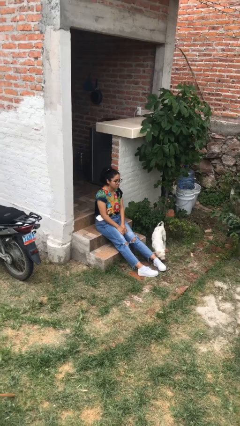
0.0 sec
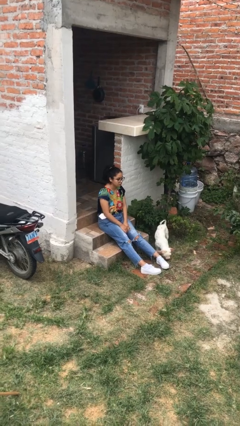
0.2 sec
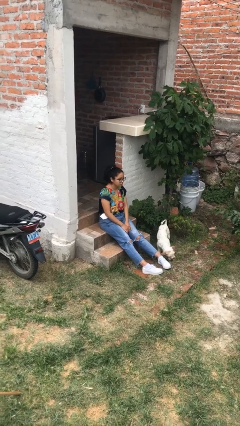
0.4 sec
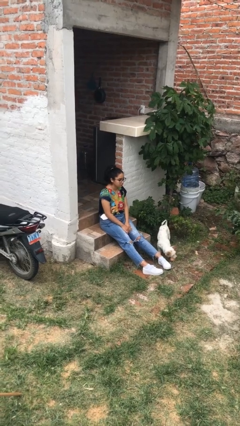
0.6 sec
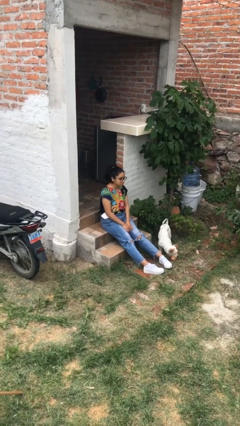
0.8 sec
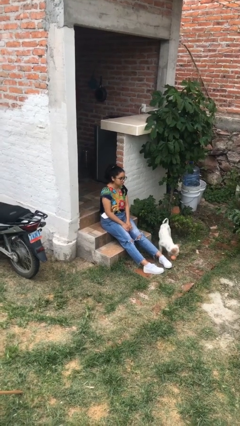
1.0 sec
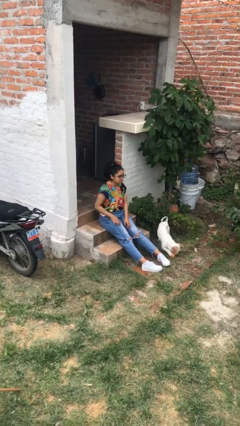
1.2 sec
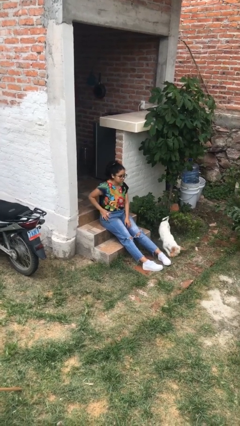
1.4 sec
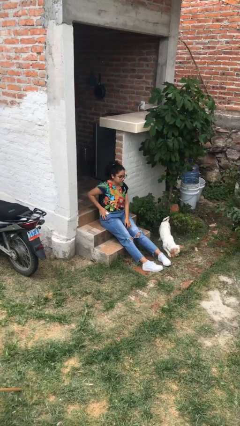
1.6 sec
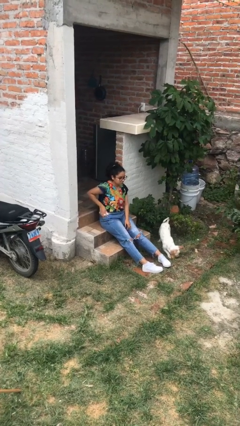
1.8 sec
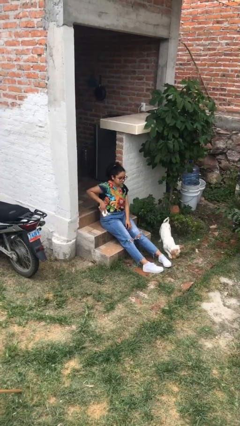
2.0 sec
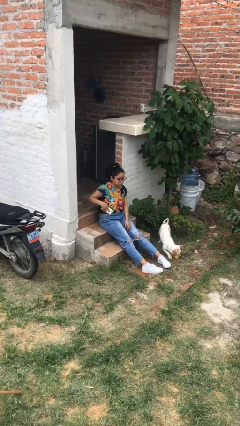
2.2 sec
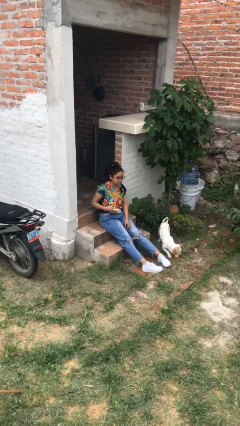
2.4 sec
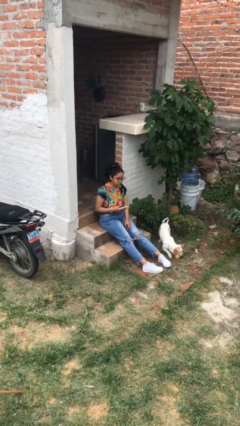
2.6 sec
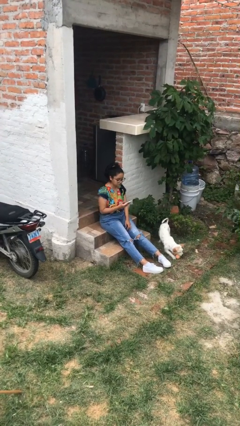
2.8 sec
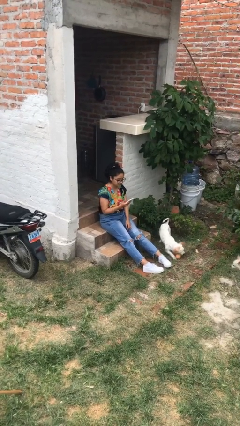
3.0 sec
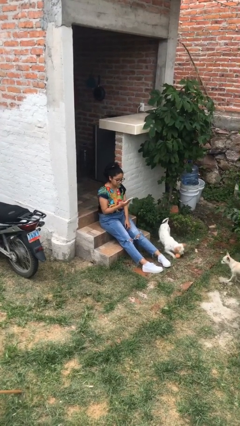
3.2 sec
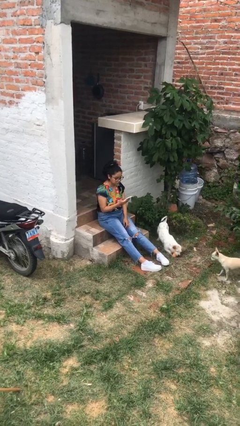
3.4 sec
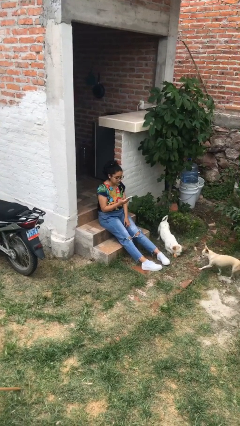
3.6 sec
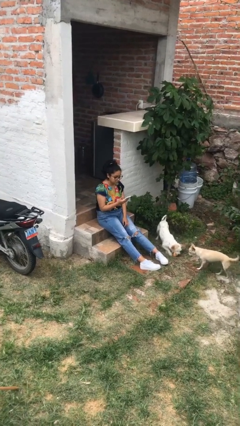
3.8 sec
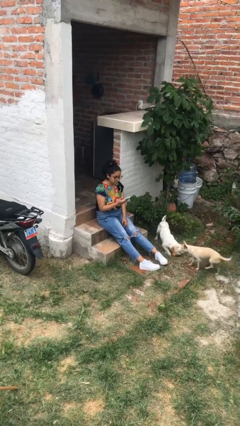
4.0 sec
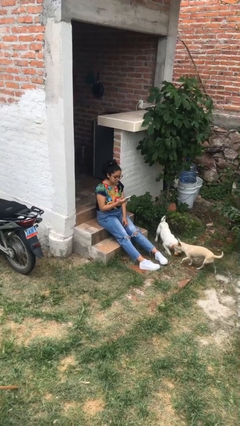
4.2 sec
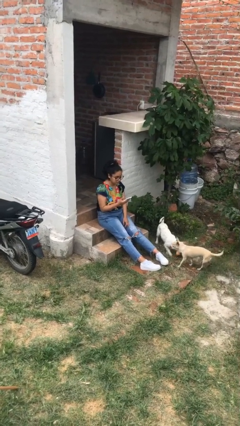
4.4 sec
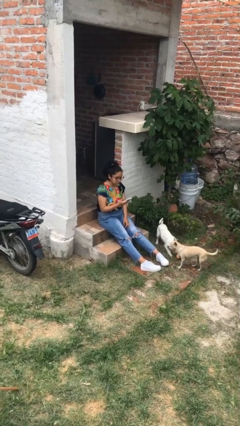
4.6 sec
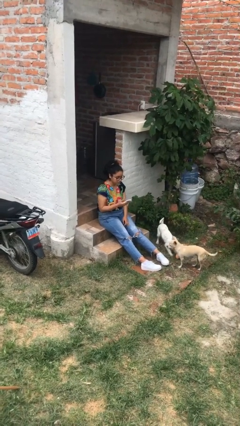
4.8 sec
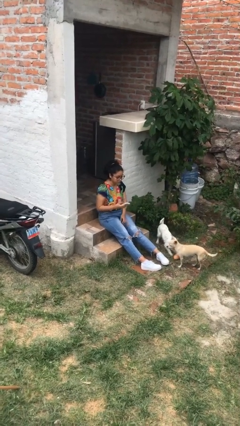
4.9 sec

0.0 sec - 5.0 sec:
person takes phone from pocket

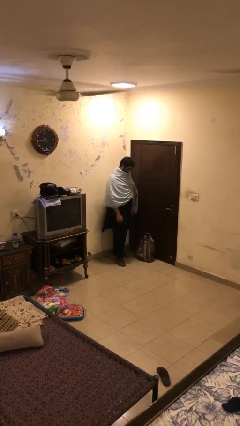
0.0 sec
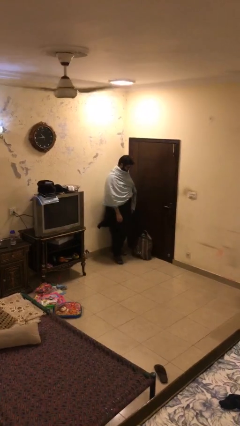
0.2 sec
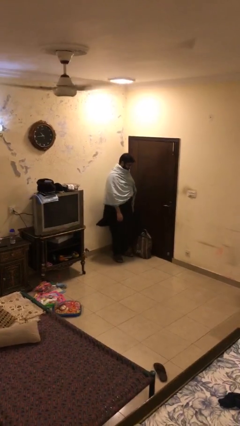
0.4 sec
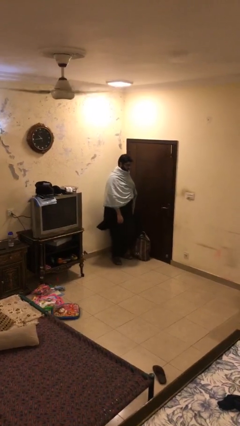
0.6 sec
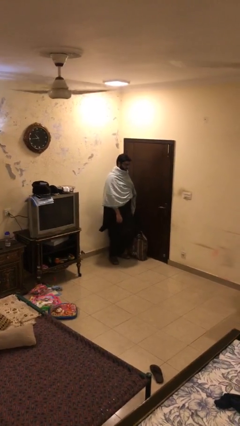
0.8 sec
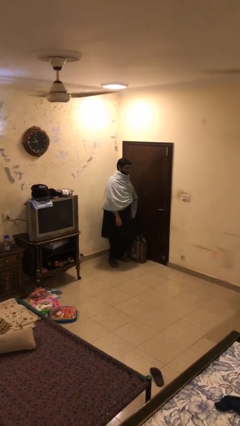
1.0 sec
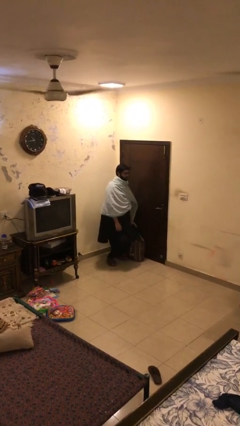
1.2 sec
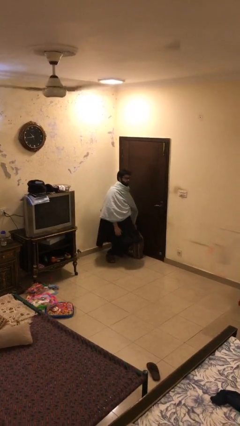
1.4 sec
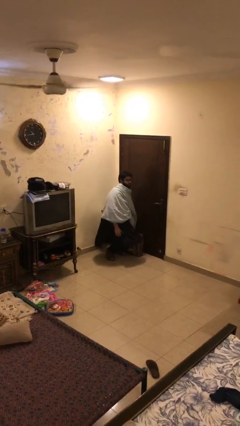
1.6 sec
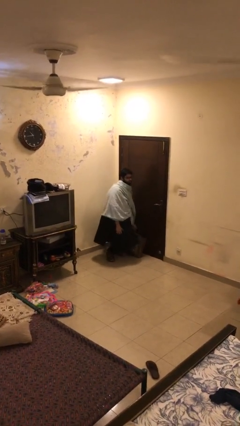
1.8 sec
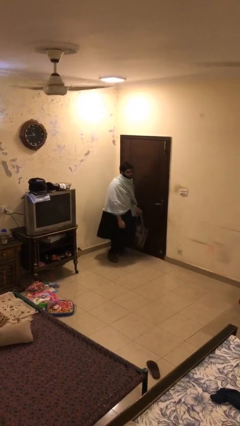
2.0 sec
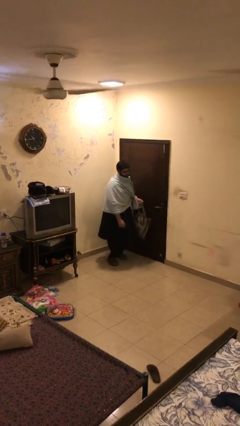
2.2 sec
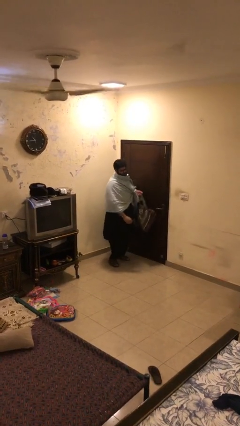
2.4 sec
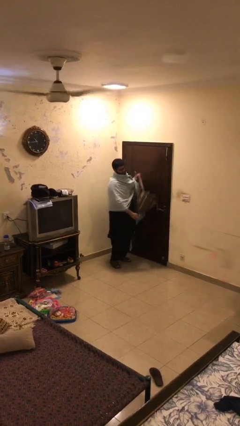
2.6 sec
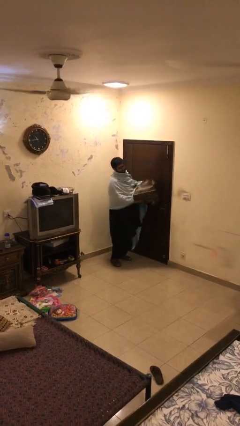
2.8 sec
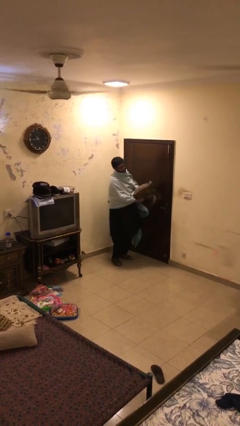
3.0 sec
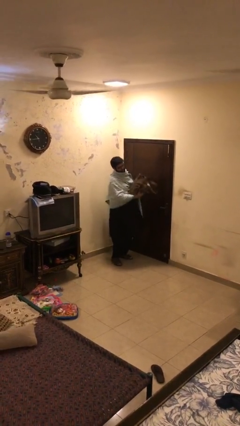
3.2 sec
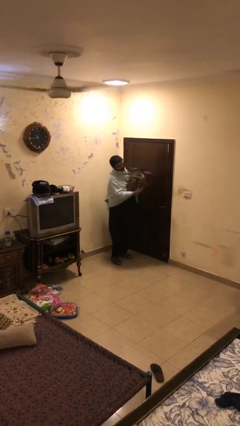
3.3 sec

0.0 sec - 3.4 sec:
person picks up object from floor

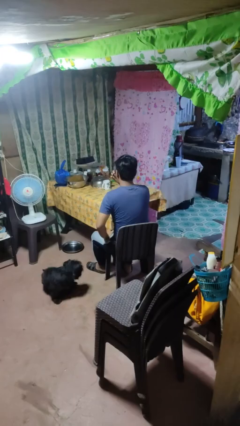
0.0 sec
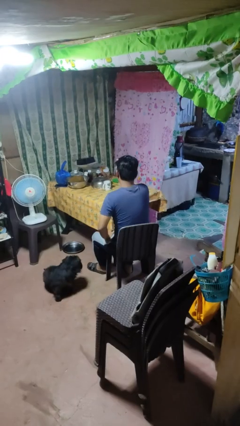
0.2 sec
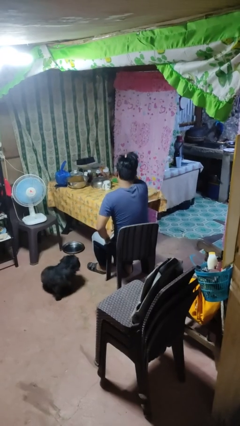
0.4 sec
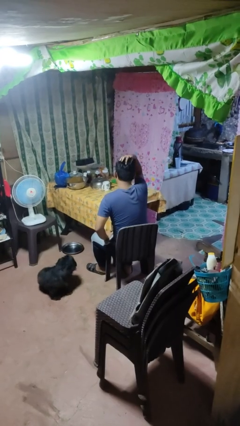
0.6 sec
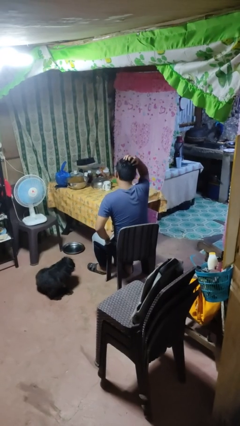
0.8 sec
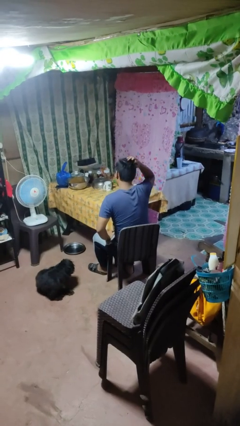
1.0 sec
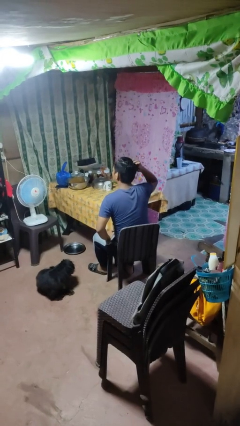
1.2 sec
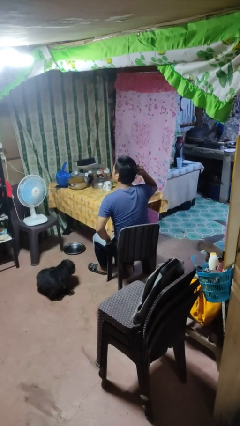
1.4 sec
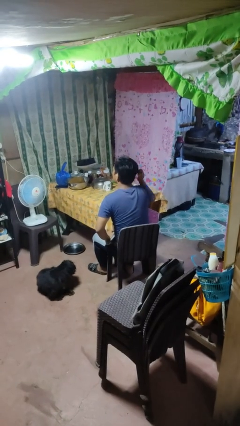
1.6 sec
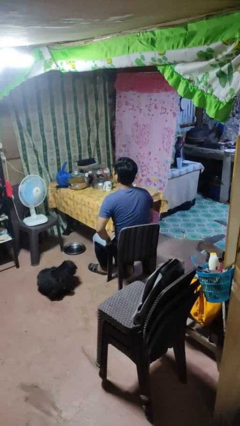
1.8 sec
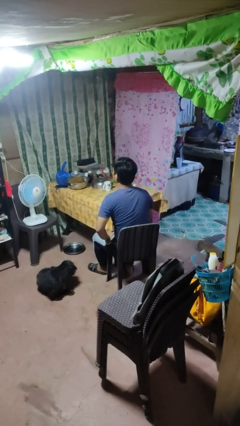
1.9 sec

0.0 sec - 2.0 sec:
person strokes hair

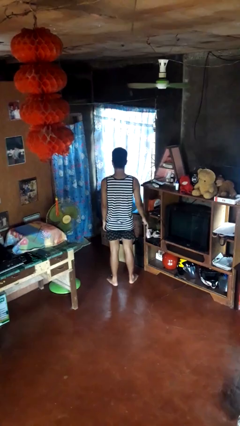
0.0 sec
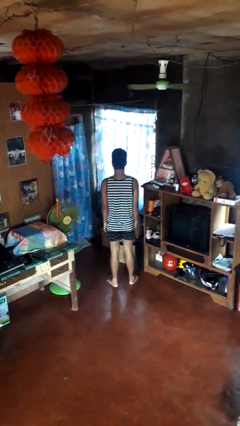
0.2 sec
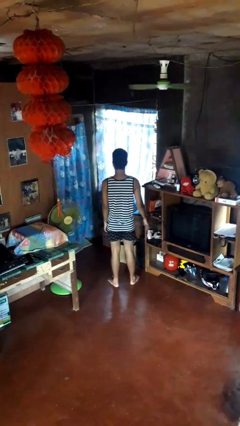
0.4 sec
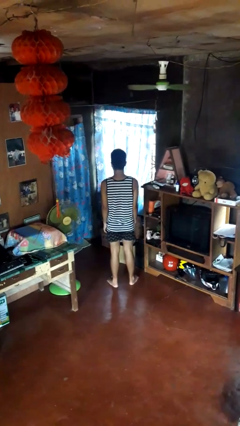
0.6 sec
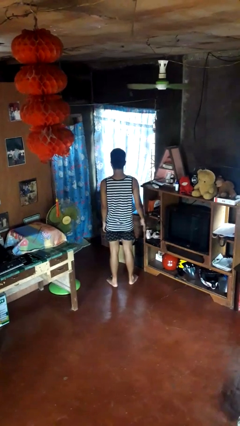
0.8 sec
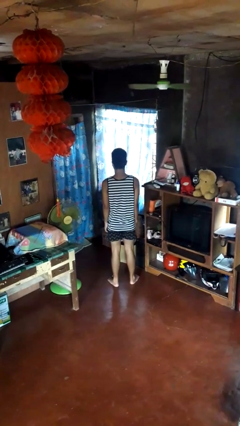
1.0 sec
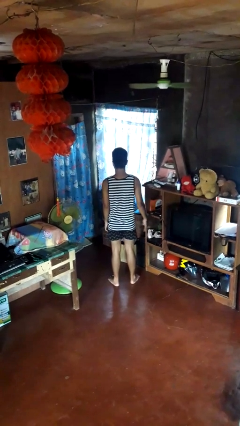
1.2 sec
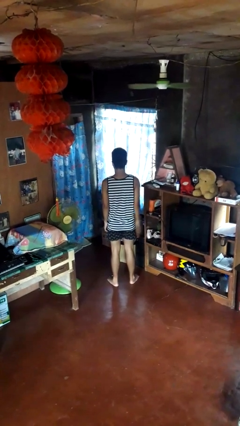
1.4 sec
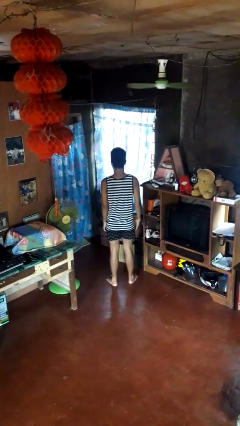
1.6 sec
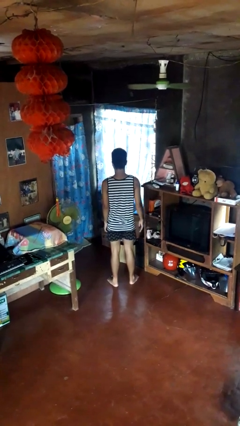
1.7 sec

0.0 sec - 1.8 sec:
person slaps hands on thighs

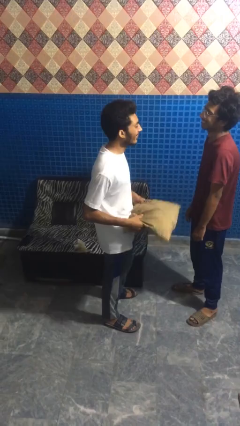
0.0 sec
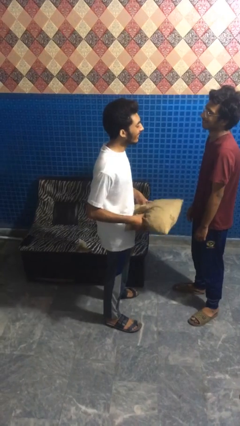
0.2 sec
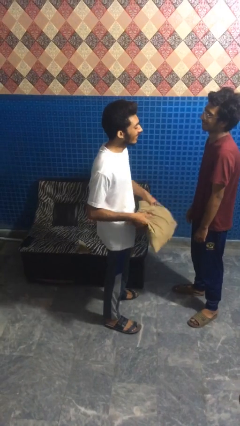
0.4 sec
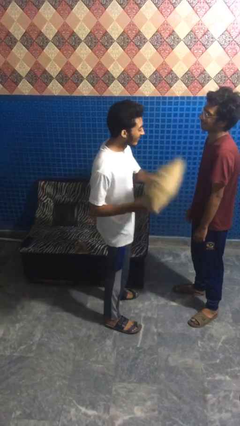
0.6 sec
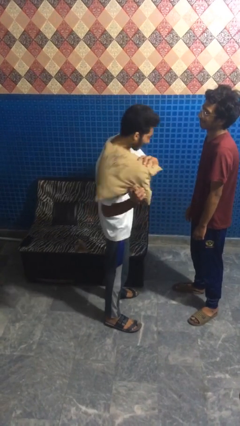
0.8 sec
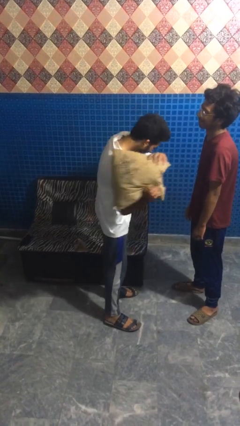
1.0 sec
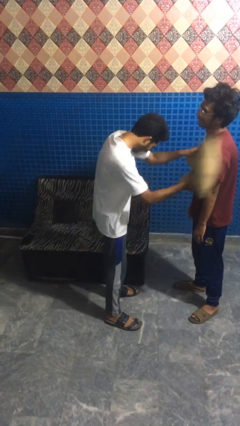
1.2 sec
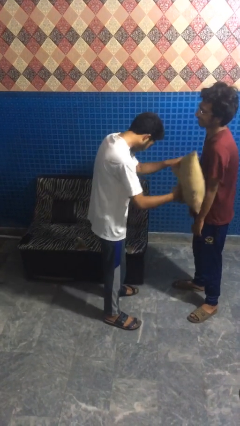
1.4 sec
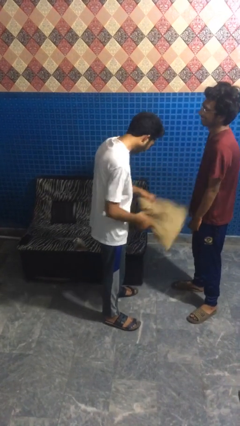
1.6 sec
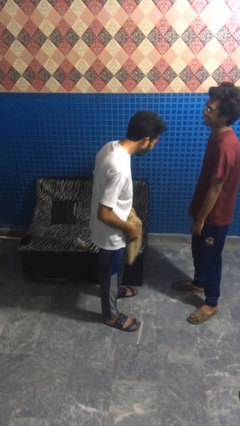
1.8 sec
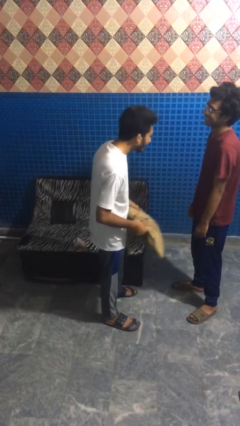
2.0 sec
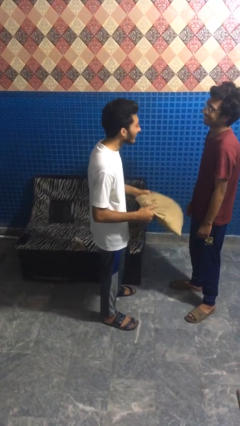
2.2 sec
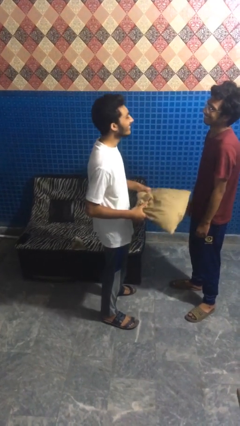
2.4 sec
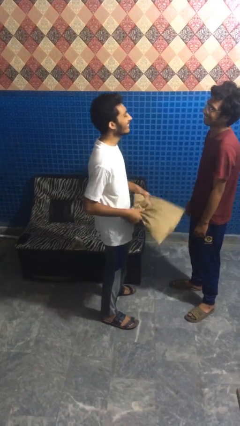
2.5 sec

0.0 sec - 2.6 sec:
person hits person with pillow

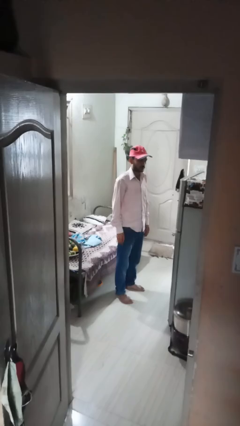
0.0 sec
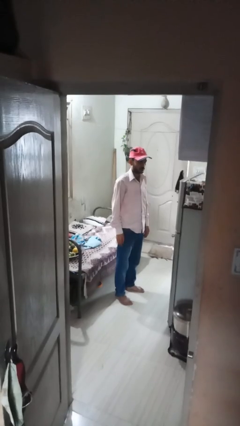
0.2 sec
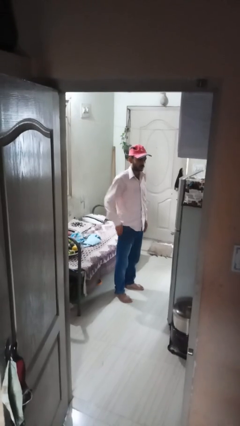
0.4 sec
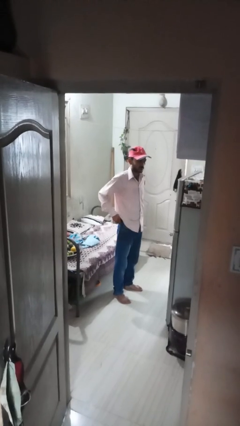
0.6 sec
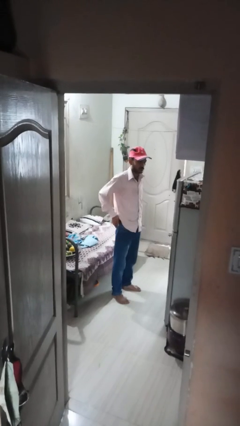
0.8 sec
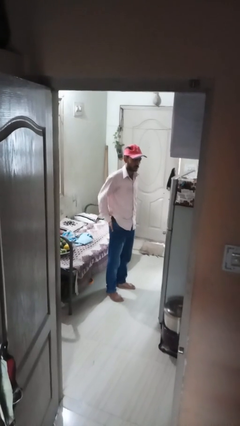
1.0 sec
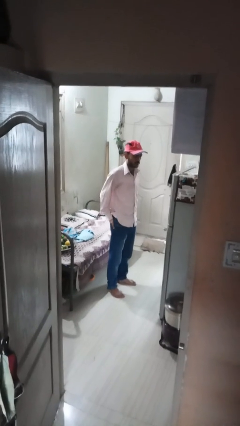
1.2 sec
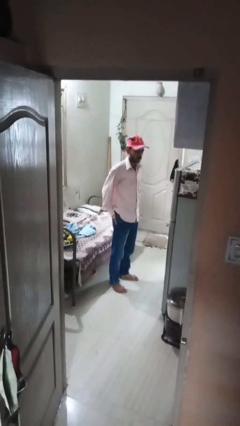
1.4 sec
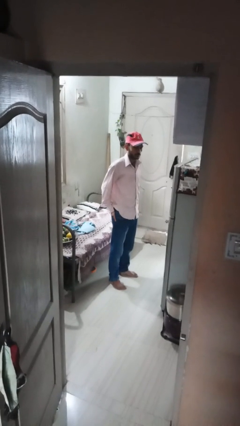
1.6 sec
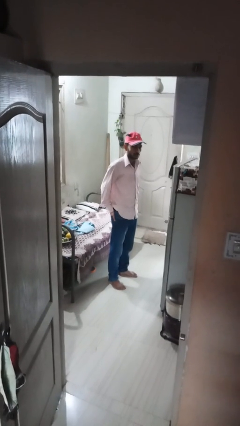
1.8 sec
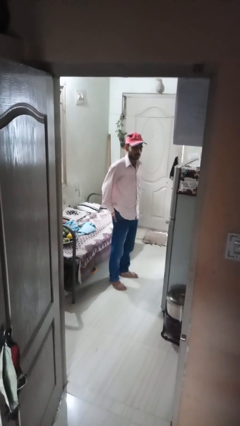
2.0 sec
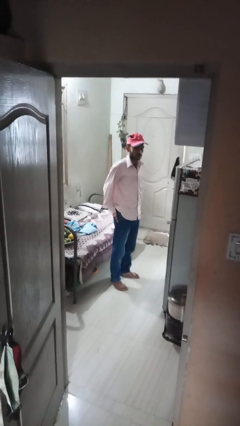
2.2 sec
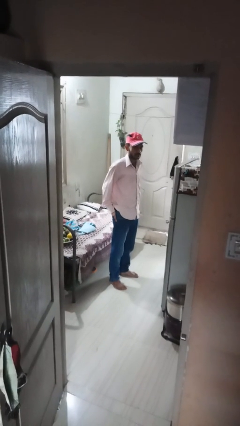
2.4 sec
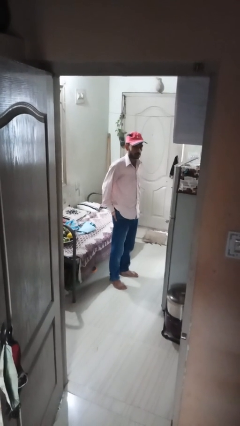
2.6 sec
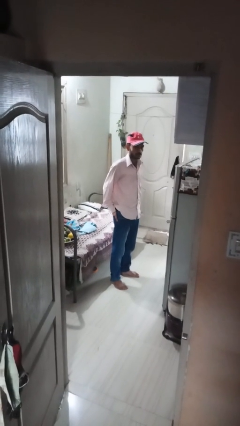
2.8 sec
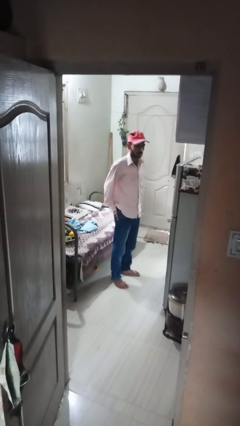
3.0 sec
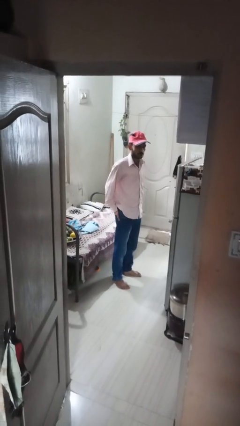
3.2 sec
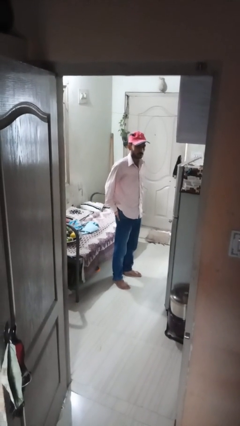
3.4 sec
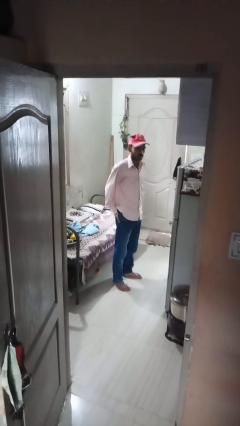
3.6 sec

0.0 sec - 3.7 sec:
person puts hands in back pockets
